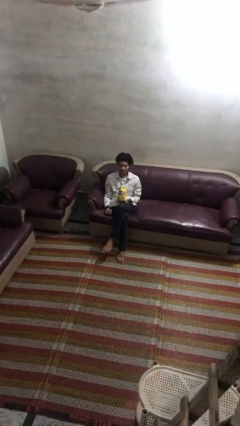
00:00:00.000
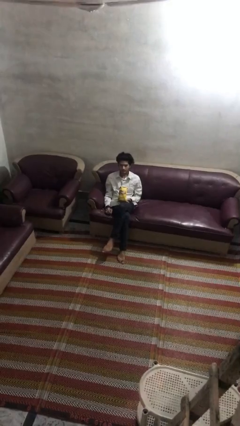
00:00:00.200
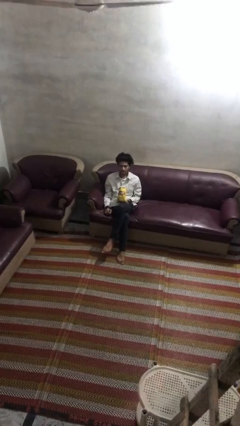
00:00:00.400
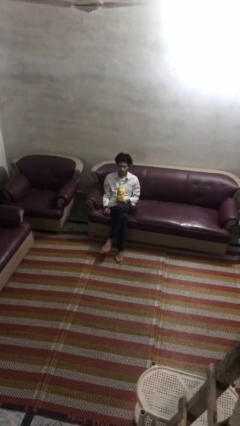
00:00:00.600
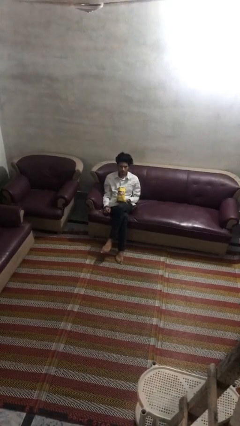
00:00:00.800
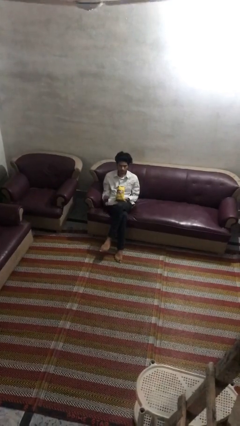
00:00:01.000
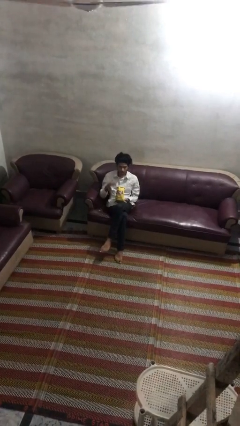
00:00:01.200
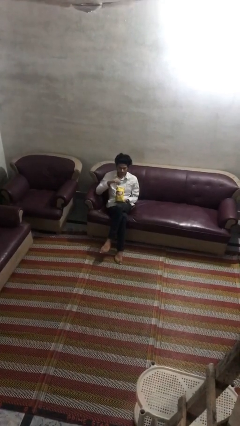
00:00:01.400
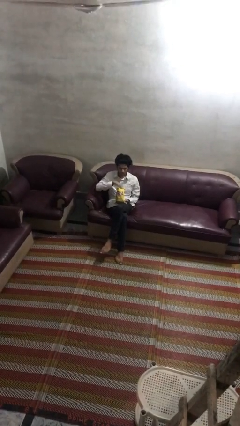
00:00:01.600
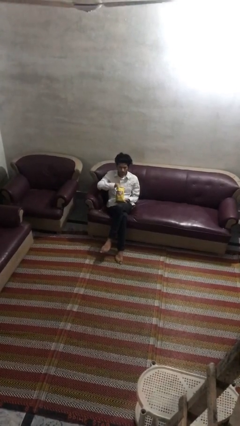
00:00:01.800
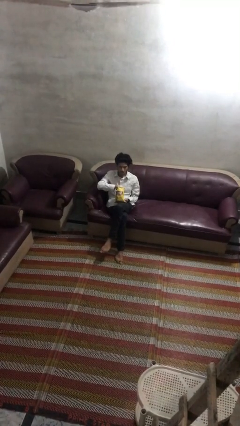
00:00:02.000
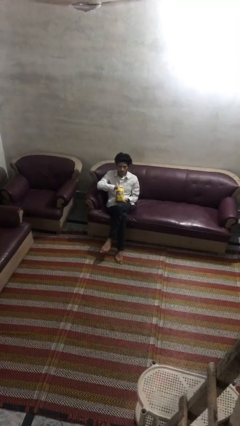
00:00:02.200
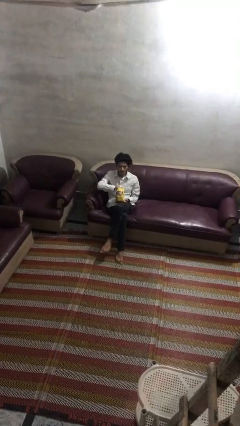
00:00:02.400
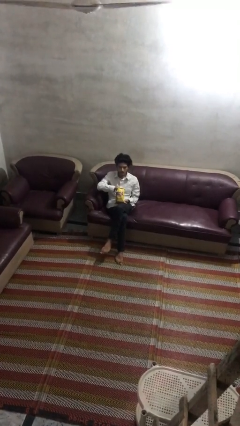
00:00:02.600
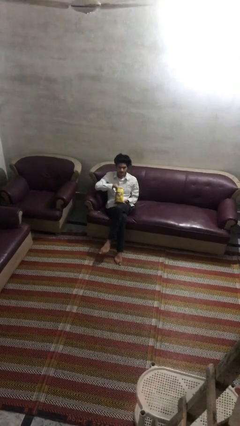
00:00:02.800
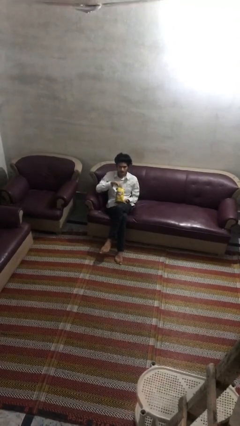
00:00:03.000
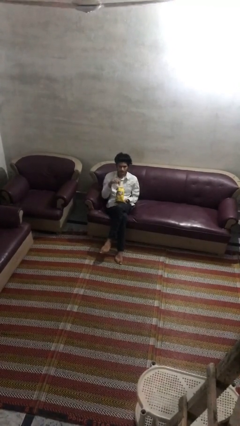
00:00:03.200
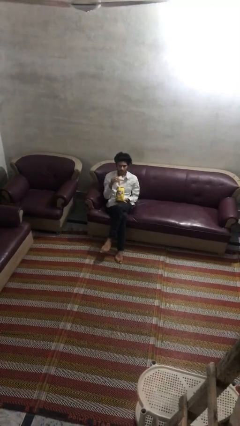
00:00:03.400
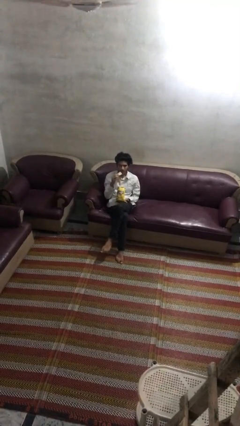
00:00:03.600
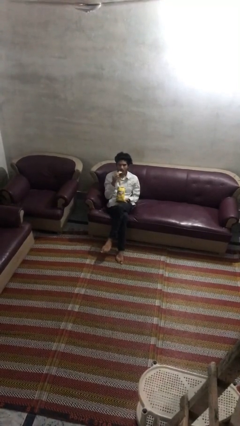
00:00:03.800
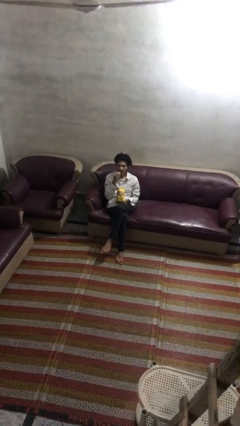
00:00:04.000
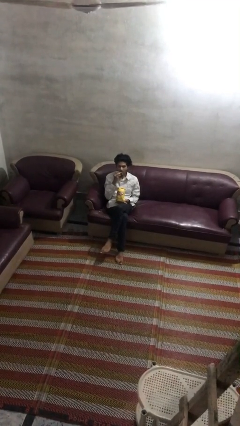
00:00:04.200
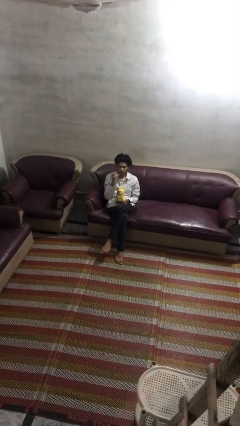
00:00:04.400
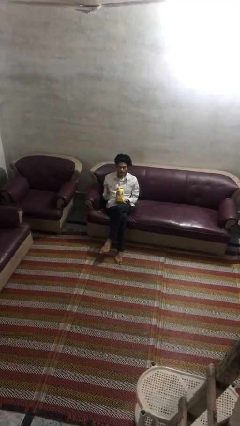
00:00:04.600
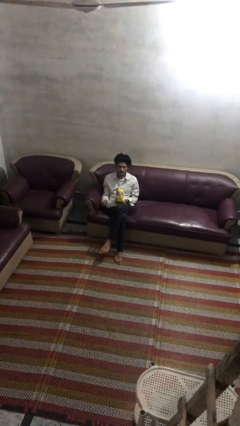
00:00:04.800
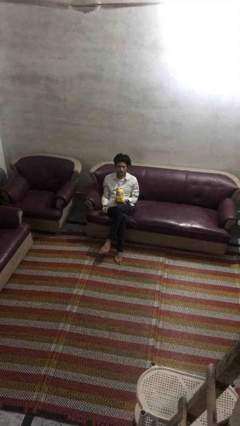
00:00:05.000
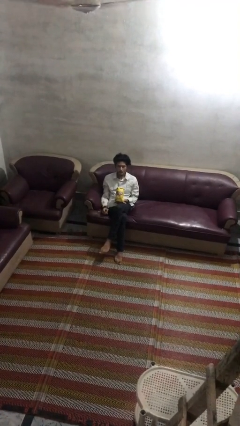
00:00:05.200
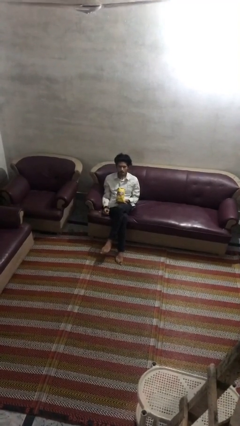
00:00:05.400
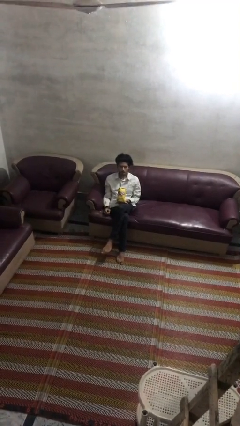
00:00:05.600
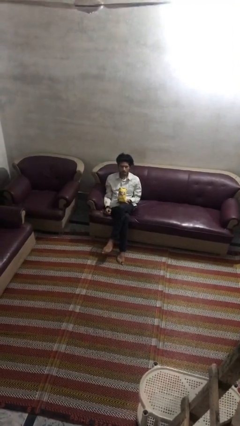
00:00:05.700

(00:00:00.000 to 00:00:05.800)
person eats snack from bag

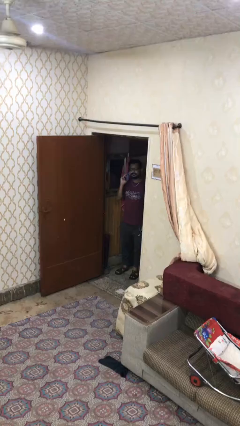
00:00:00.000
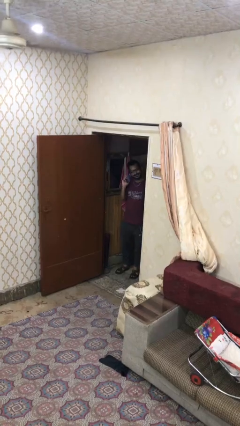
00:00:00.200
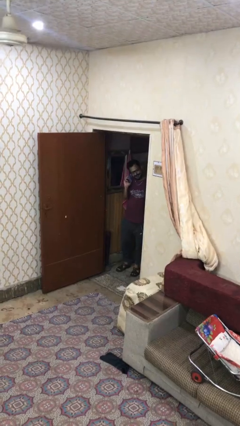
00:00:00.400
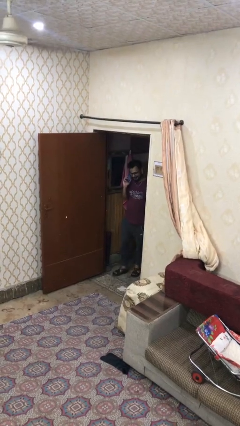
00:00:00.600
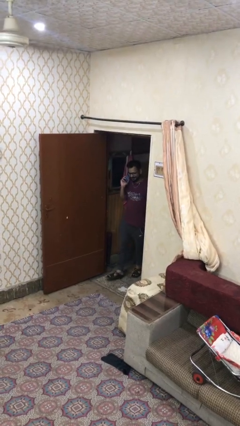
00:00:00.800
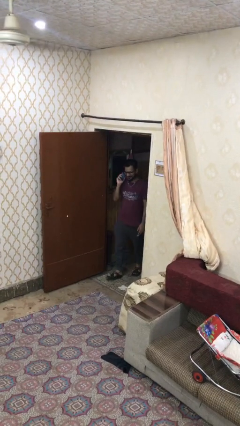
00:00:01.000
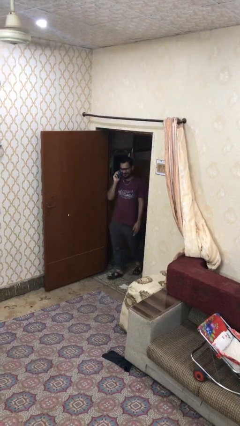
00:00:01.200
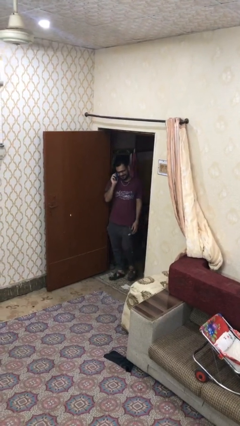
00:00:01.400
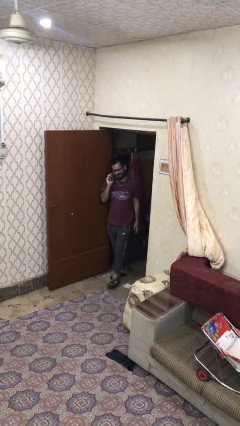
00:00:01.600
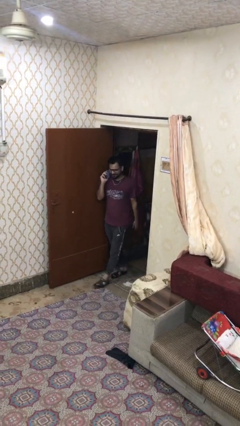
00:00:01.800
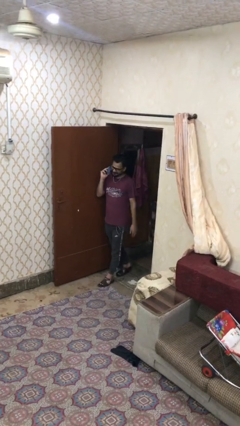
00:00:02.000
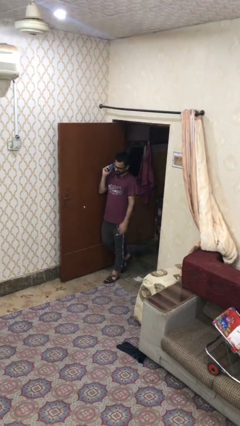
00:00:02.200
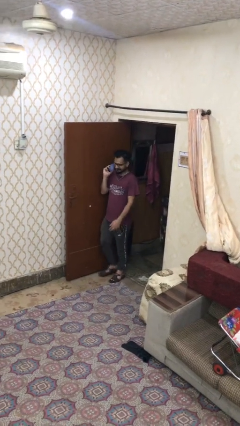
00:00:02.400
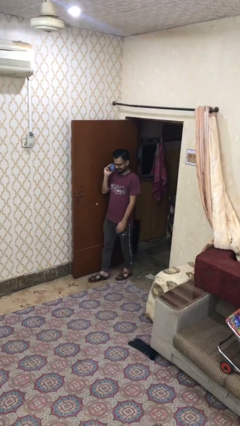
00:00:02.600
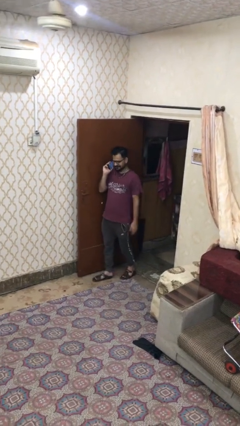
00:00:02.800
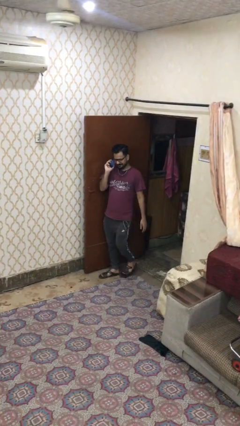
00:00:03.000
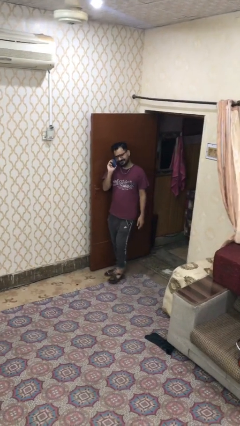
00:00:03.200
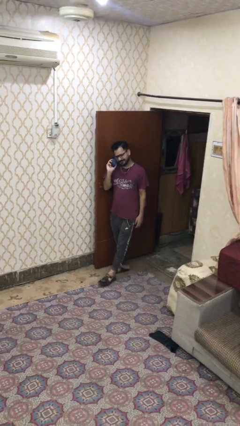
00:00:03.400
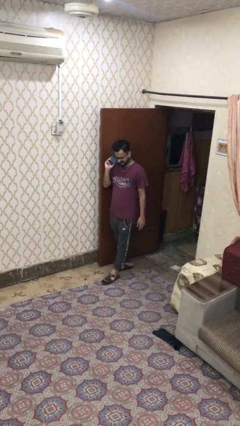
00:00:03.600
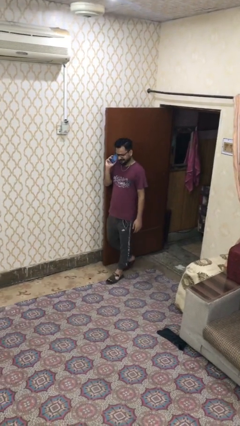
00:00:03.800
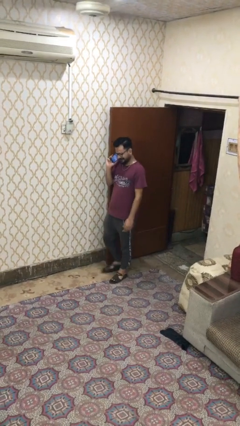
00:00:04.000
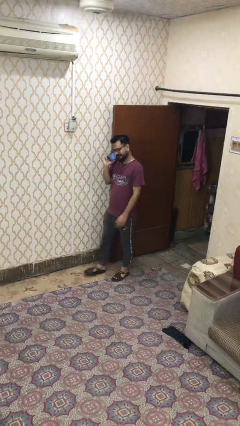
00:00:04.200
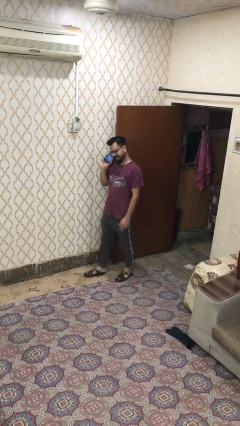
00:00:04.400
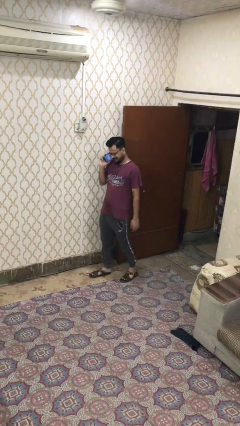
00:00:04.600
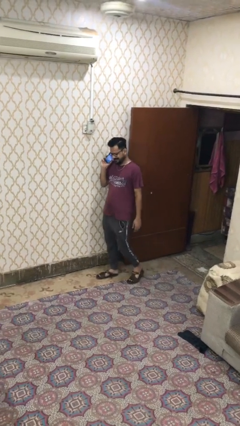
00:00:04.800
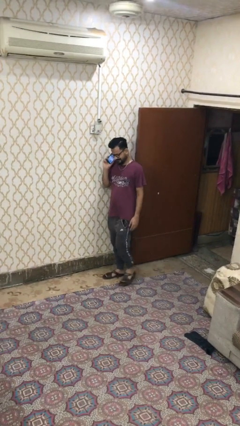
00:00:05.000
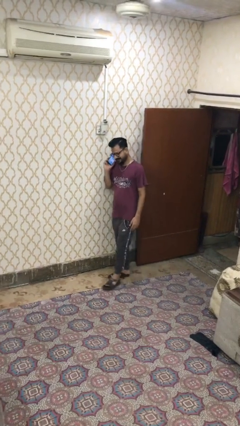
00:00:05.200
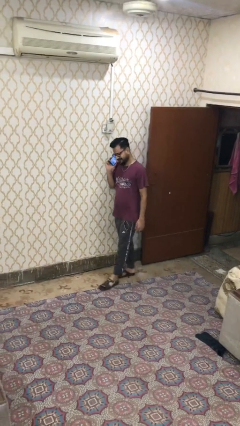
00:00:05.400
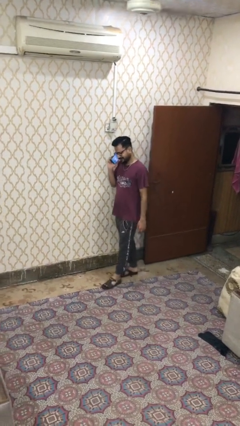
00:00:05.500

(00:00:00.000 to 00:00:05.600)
person enters scene through structure

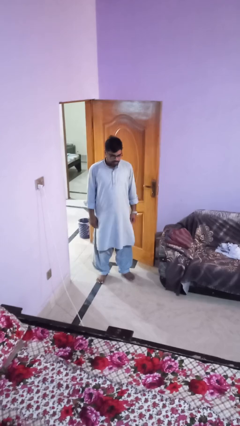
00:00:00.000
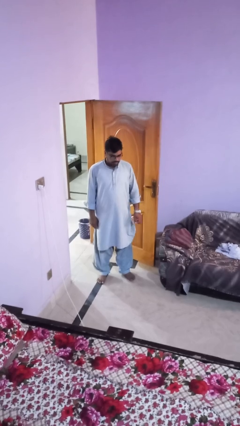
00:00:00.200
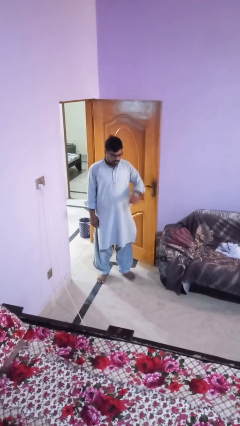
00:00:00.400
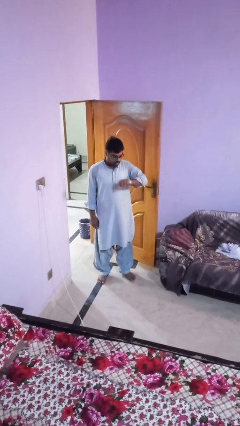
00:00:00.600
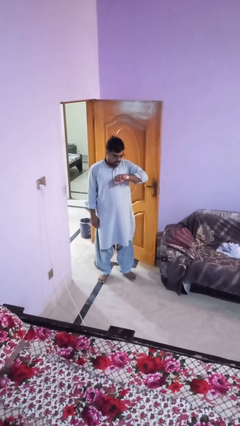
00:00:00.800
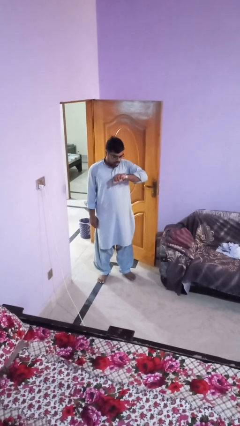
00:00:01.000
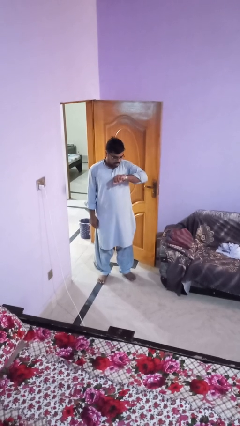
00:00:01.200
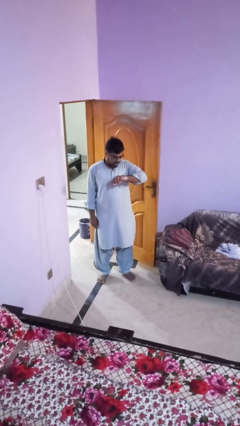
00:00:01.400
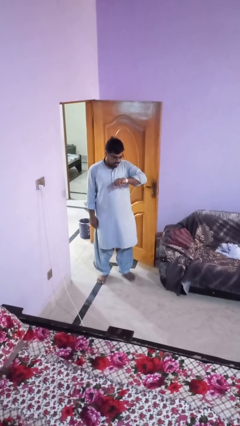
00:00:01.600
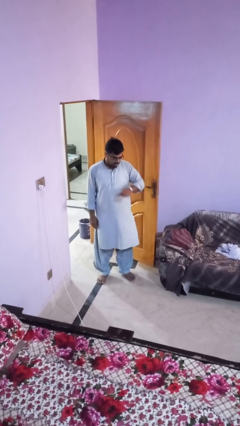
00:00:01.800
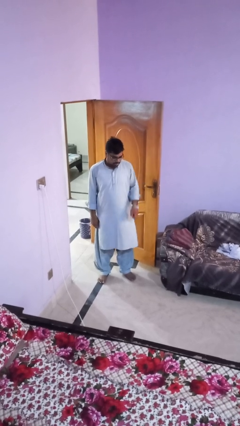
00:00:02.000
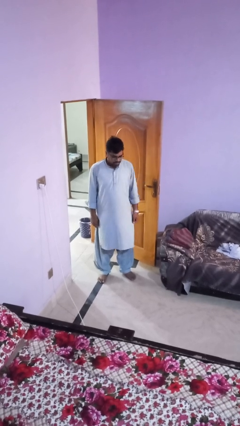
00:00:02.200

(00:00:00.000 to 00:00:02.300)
person looks at wristwatch

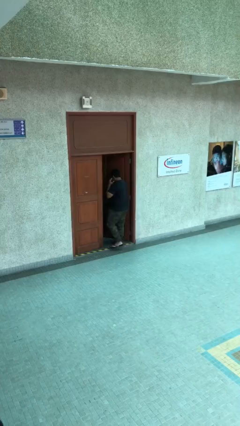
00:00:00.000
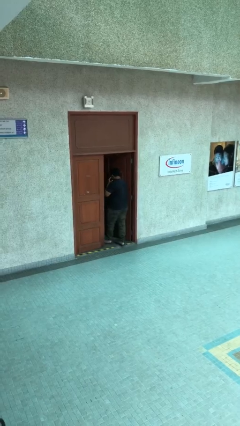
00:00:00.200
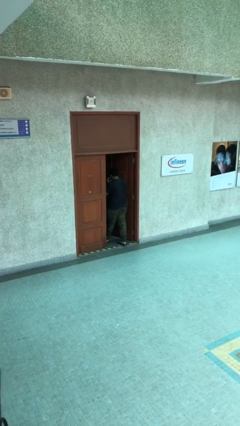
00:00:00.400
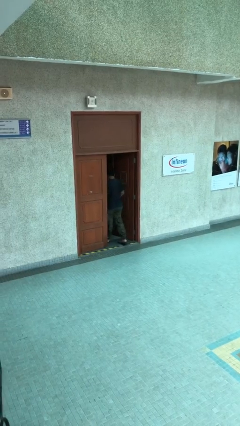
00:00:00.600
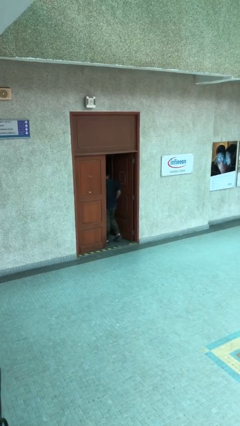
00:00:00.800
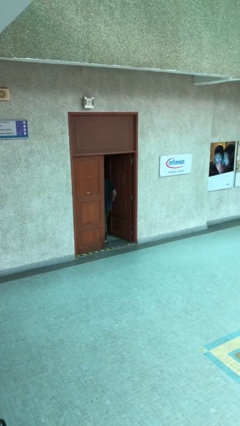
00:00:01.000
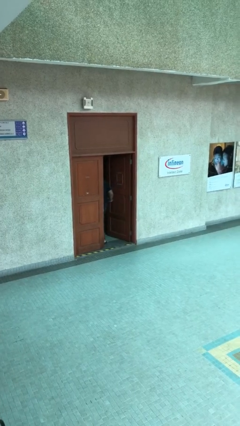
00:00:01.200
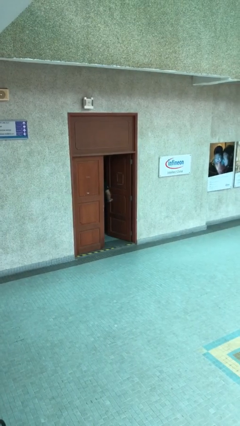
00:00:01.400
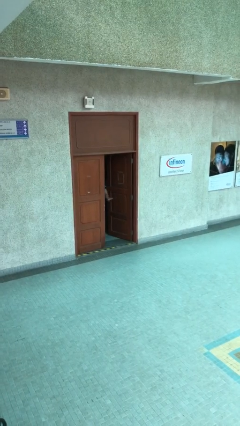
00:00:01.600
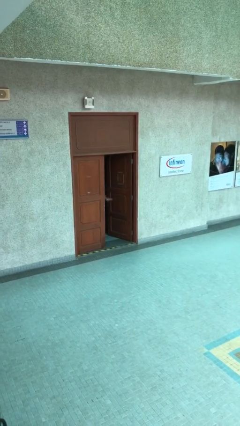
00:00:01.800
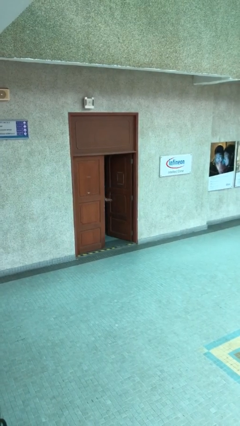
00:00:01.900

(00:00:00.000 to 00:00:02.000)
person exits scene through structure

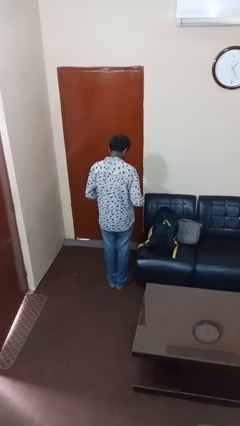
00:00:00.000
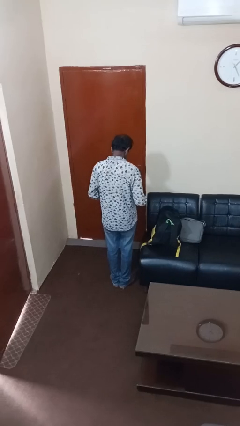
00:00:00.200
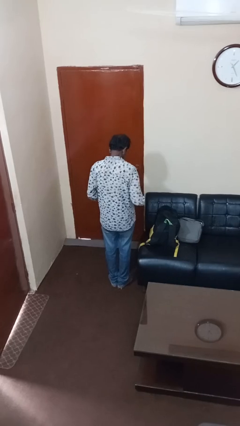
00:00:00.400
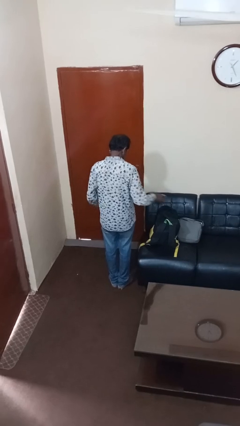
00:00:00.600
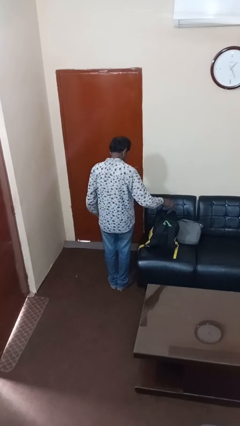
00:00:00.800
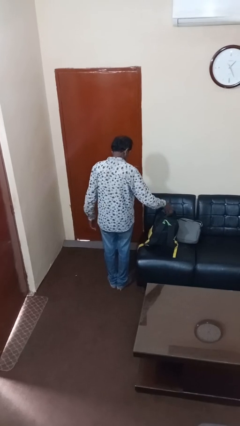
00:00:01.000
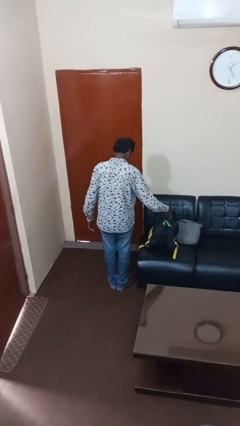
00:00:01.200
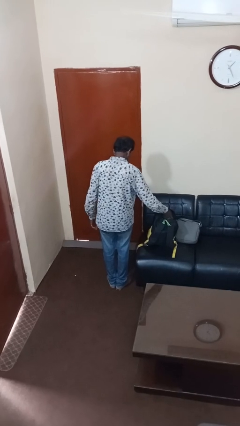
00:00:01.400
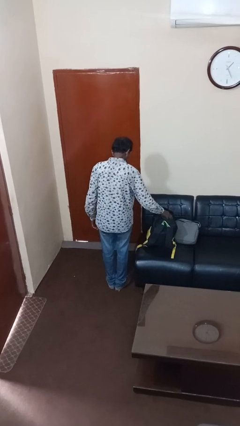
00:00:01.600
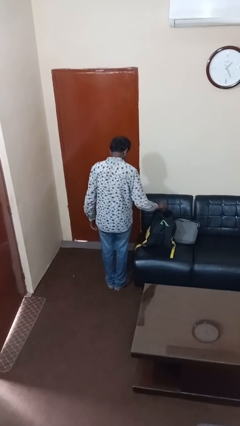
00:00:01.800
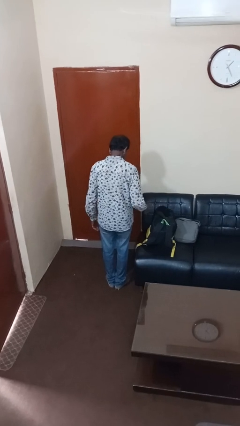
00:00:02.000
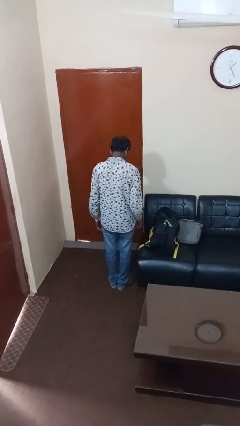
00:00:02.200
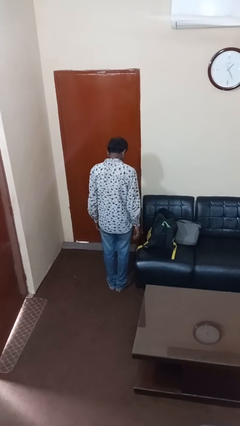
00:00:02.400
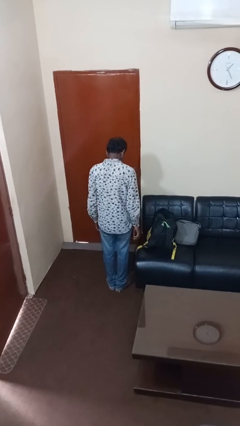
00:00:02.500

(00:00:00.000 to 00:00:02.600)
person puts object into backpack
